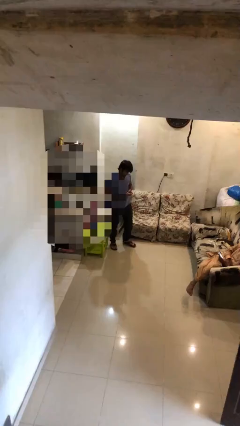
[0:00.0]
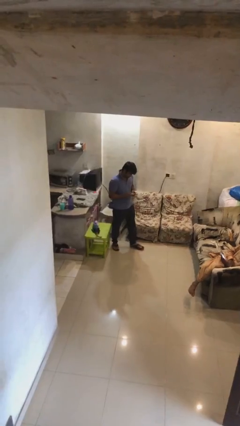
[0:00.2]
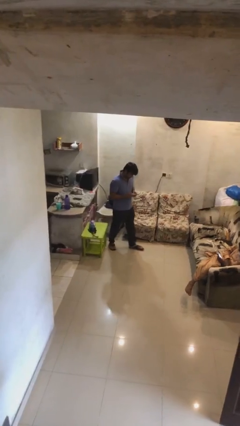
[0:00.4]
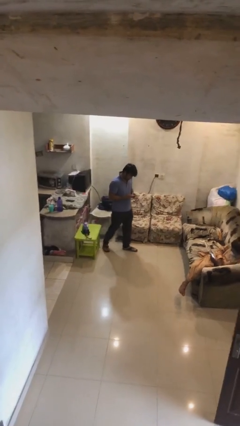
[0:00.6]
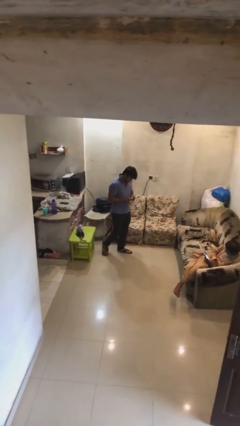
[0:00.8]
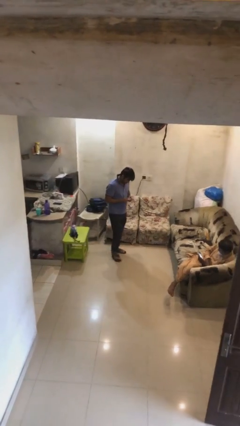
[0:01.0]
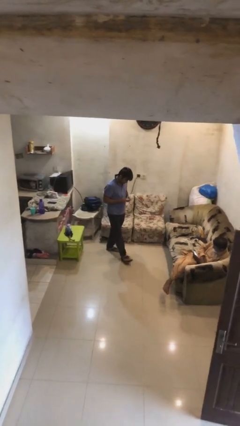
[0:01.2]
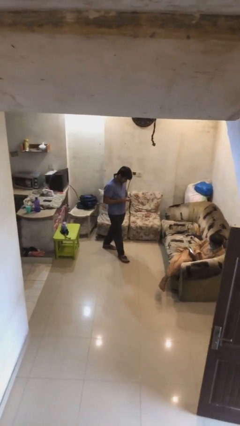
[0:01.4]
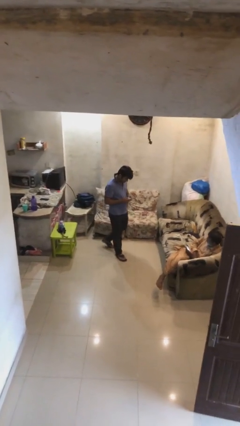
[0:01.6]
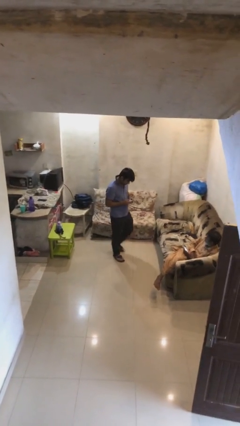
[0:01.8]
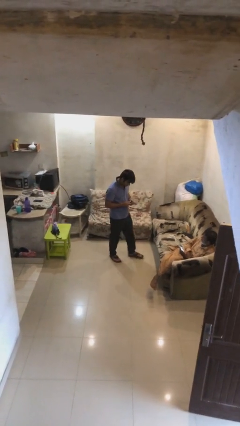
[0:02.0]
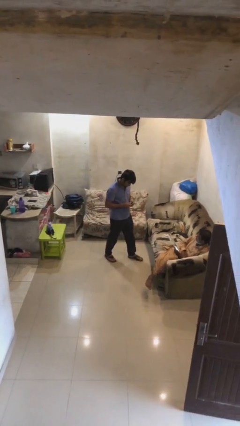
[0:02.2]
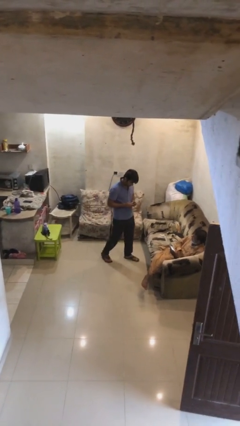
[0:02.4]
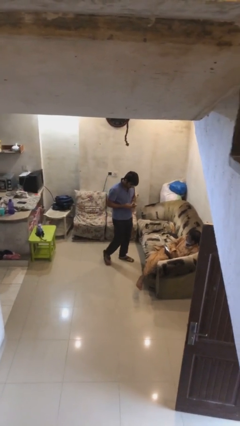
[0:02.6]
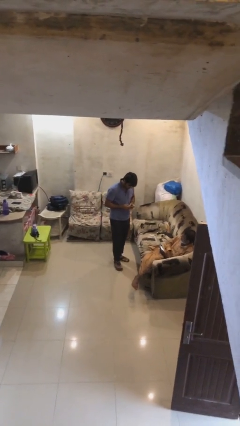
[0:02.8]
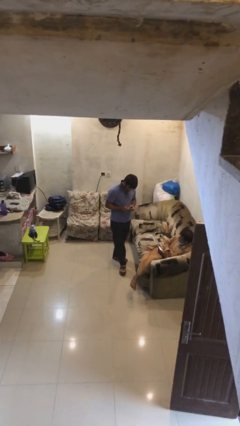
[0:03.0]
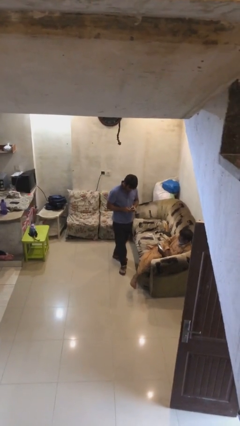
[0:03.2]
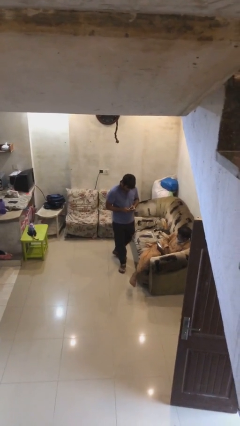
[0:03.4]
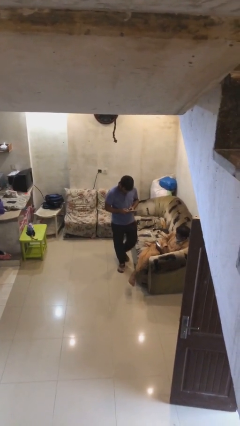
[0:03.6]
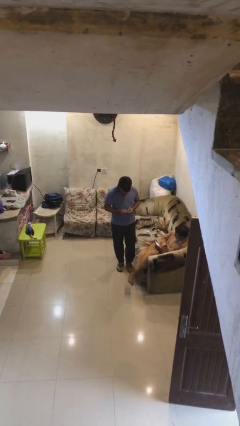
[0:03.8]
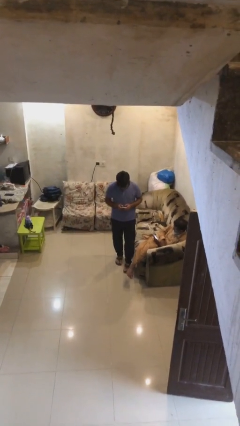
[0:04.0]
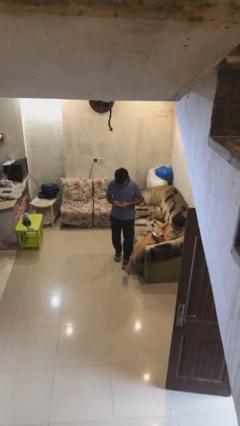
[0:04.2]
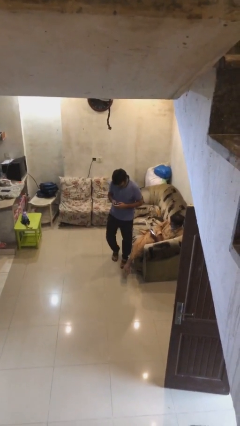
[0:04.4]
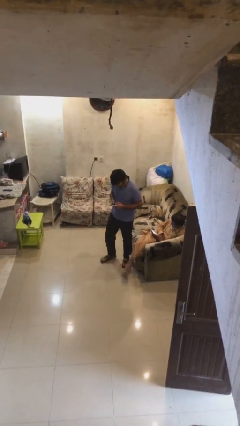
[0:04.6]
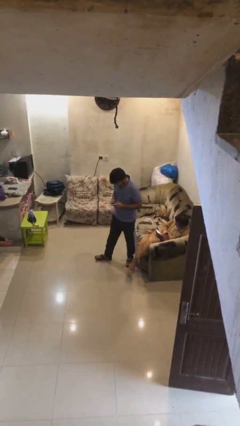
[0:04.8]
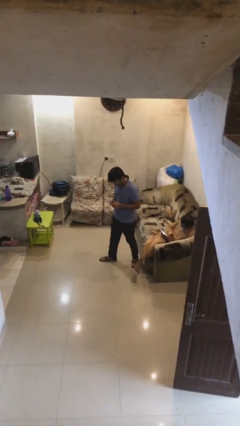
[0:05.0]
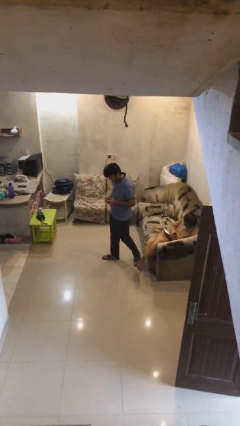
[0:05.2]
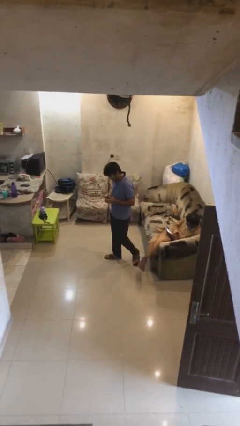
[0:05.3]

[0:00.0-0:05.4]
person texts on phone

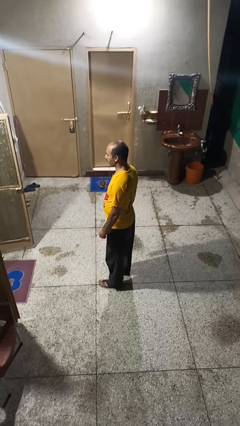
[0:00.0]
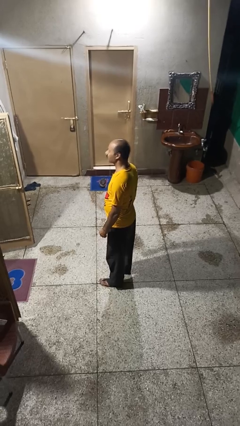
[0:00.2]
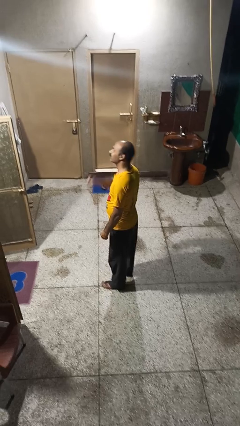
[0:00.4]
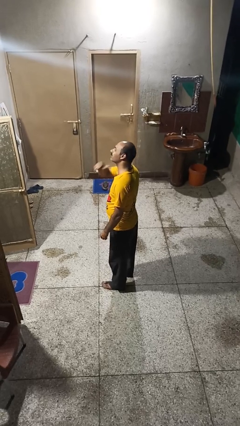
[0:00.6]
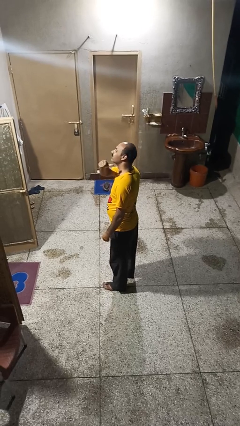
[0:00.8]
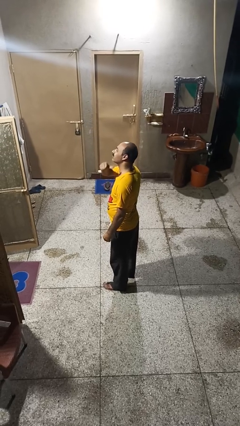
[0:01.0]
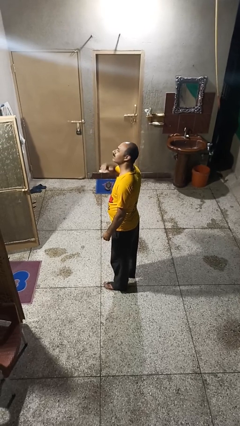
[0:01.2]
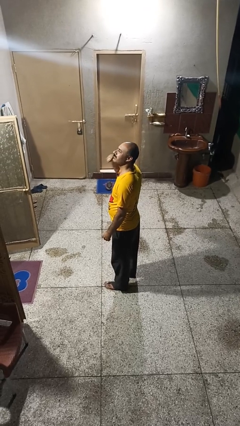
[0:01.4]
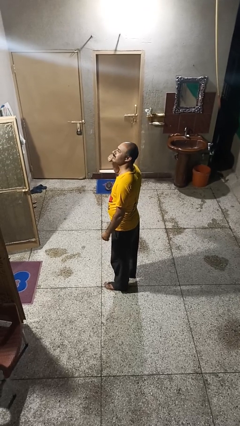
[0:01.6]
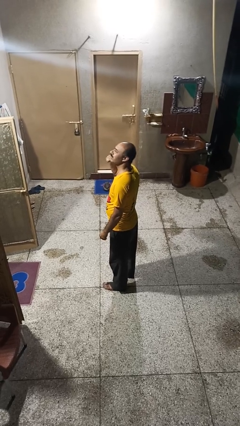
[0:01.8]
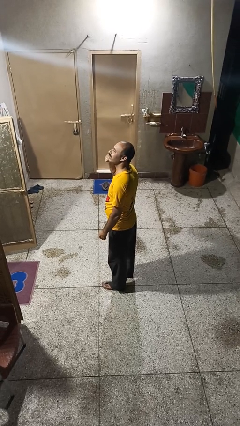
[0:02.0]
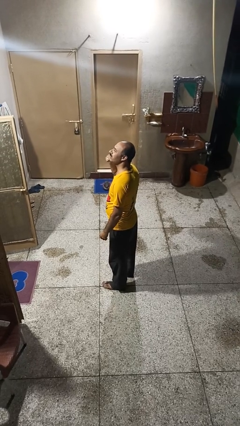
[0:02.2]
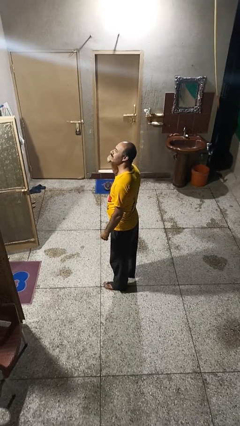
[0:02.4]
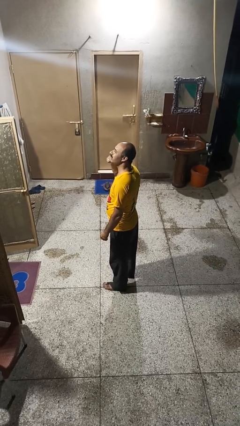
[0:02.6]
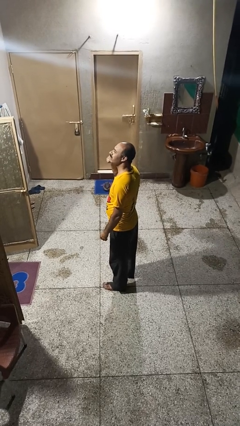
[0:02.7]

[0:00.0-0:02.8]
person gestures cut

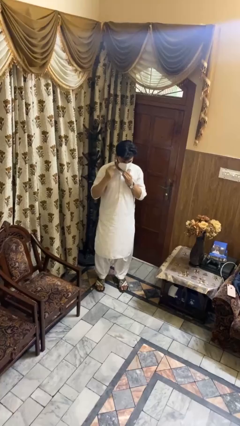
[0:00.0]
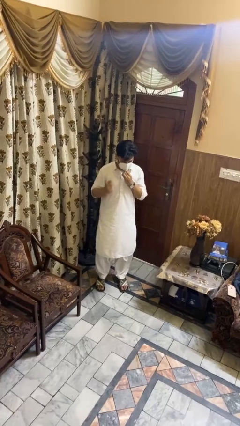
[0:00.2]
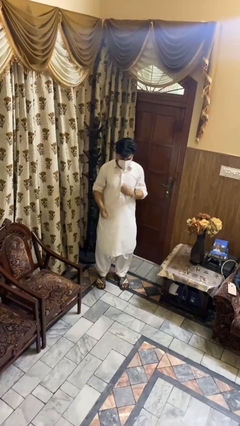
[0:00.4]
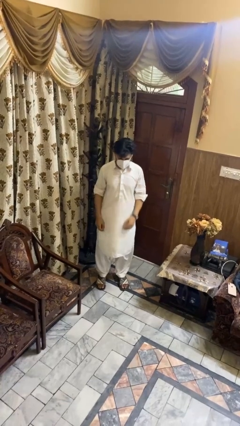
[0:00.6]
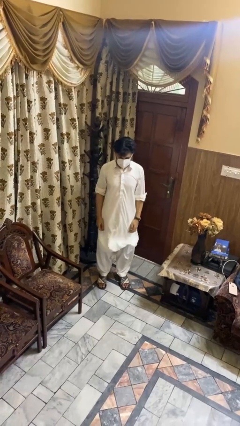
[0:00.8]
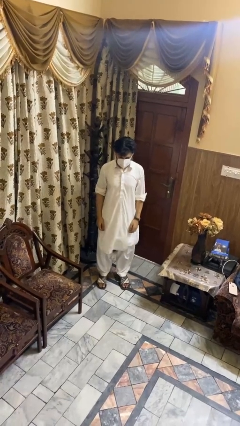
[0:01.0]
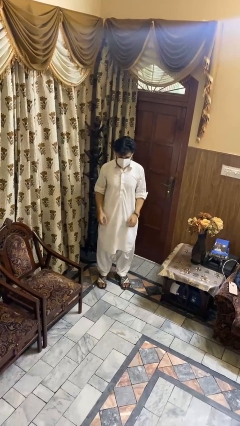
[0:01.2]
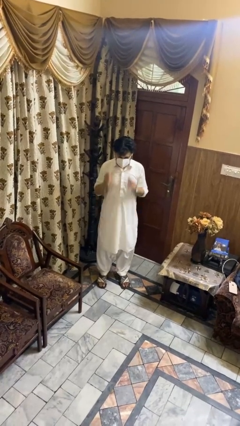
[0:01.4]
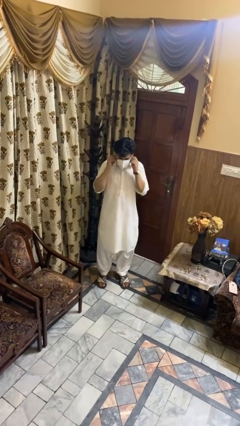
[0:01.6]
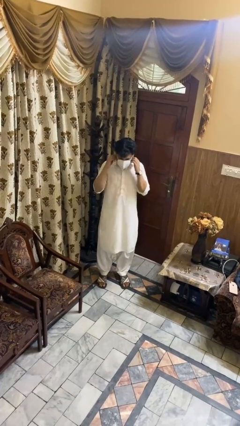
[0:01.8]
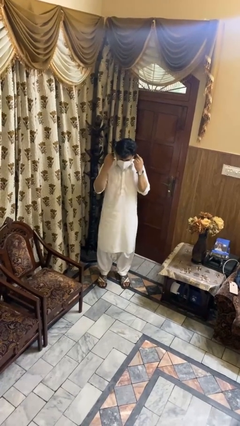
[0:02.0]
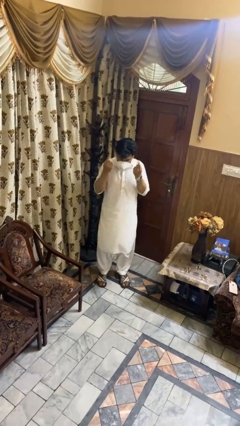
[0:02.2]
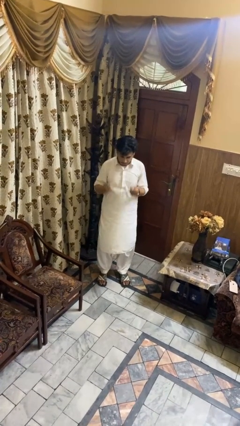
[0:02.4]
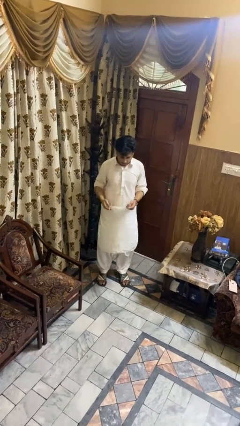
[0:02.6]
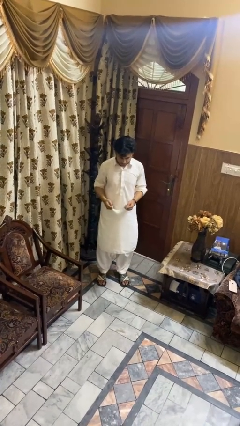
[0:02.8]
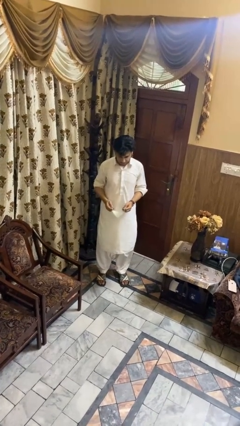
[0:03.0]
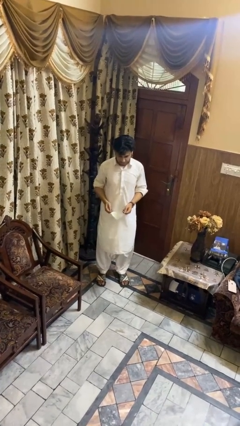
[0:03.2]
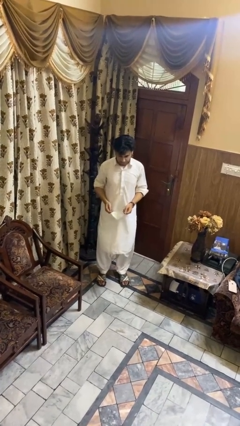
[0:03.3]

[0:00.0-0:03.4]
person takes off facemask

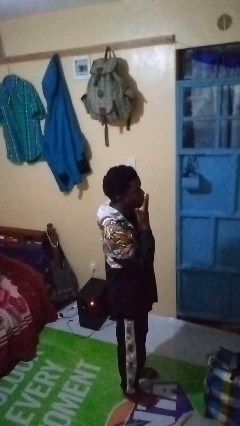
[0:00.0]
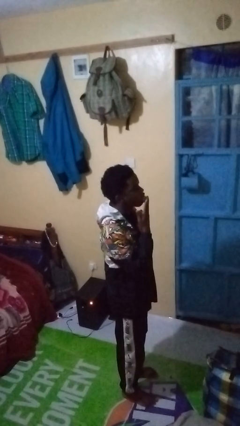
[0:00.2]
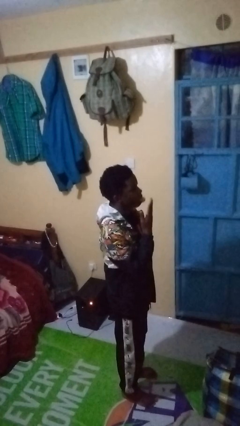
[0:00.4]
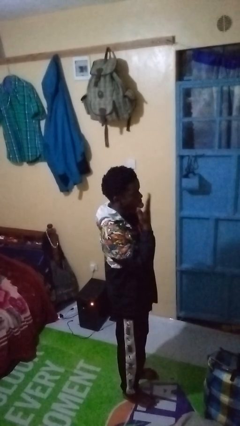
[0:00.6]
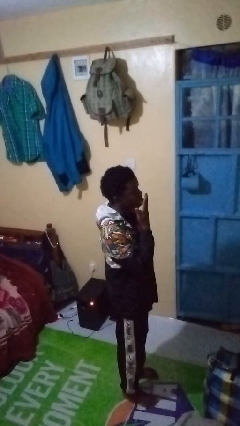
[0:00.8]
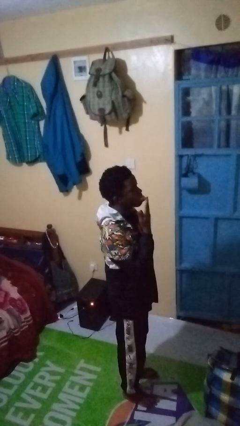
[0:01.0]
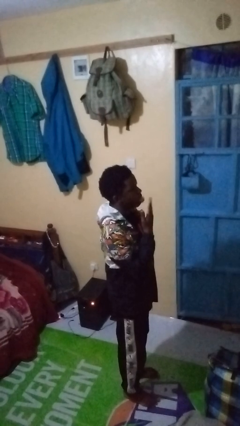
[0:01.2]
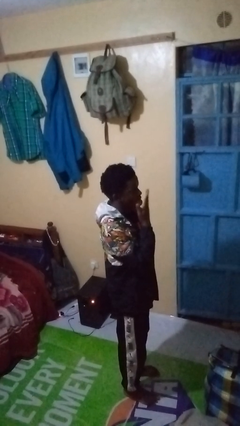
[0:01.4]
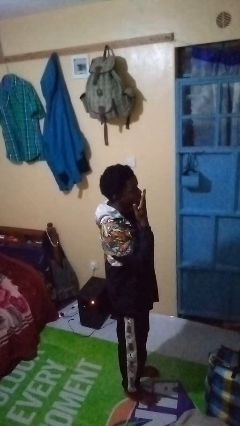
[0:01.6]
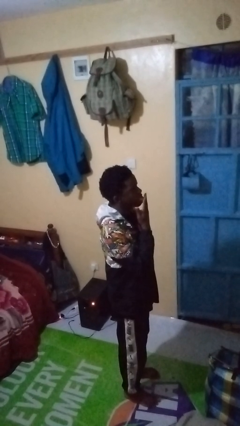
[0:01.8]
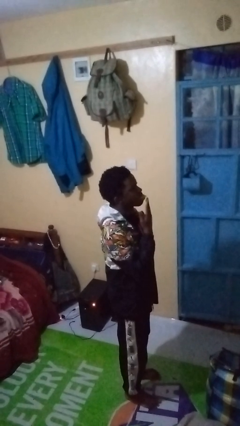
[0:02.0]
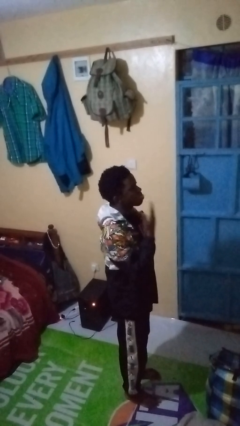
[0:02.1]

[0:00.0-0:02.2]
person licks fingers

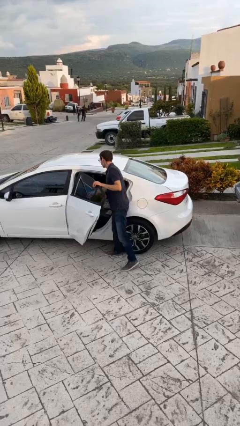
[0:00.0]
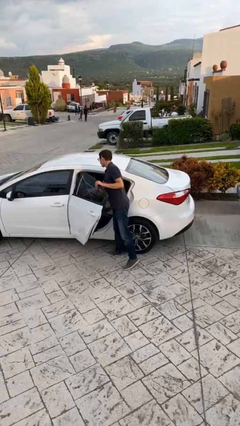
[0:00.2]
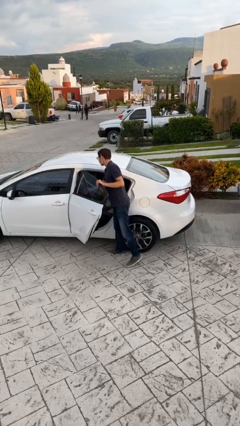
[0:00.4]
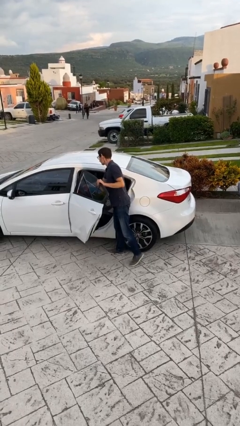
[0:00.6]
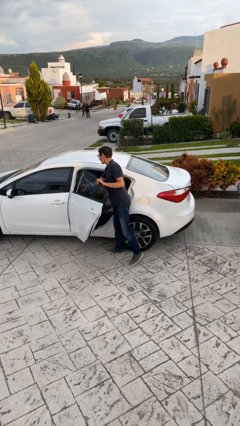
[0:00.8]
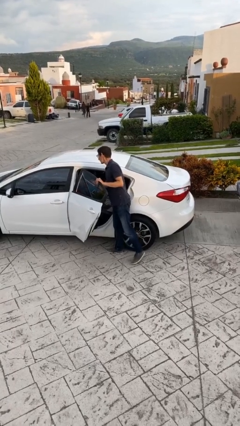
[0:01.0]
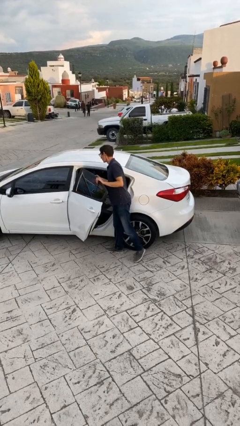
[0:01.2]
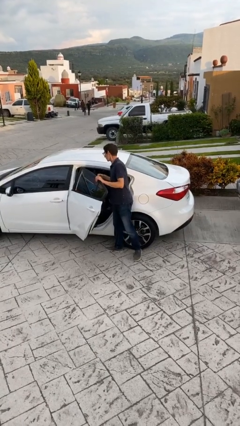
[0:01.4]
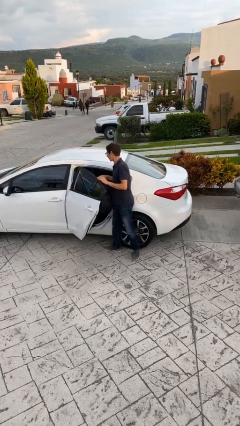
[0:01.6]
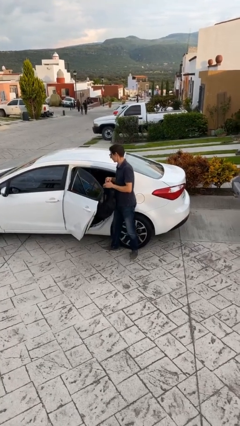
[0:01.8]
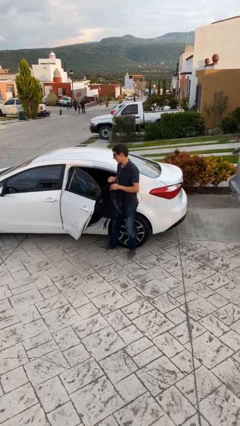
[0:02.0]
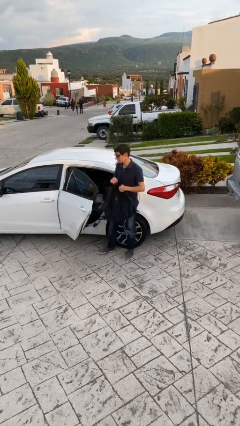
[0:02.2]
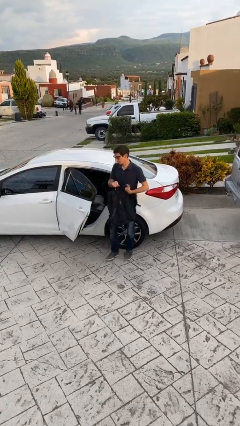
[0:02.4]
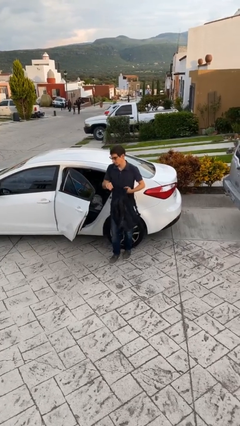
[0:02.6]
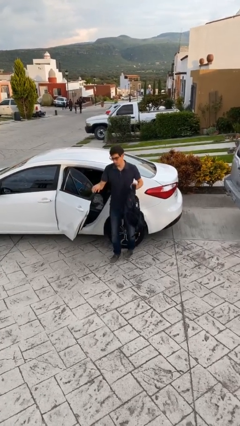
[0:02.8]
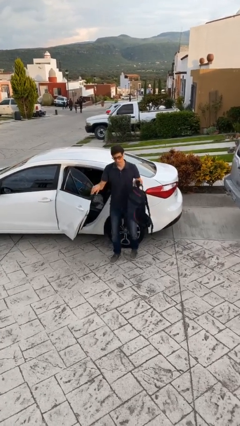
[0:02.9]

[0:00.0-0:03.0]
person unloads car

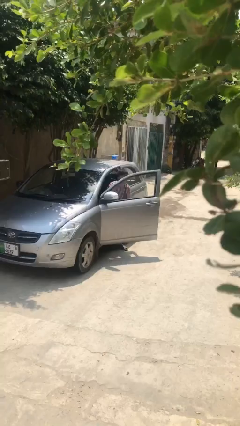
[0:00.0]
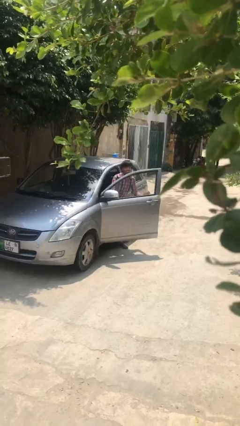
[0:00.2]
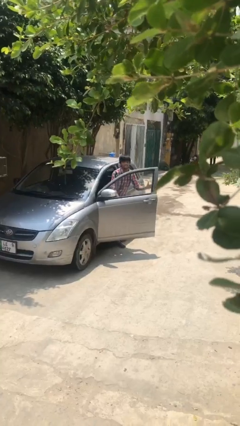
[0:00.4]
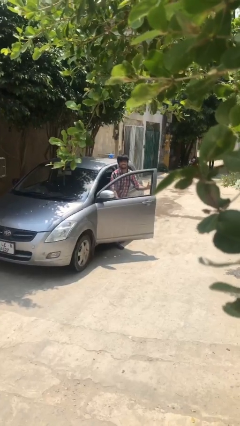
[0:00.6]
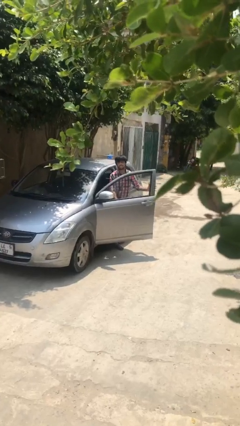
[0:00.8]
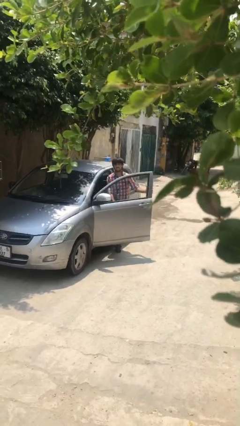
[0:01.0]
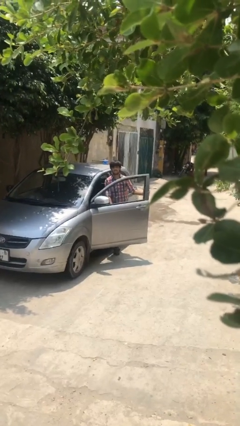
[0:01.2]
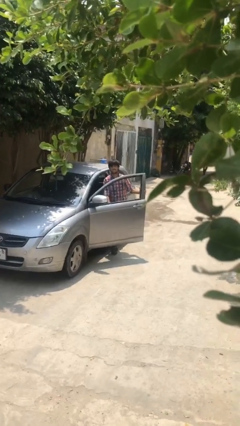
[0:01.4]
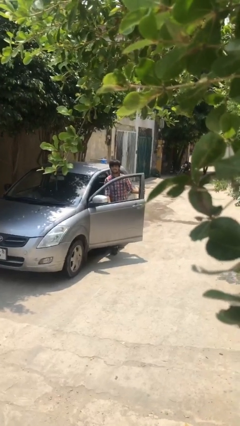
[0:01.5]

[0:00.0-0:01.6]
person exits car
